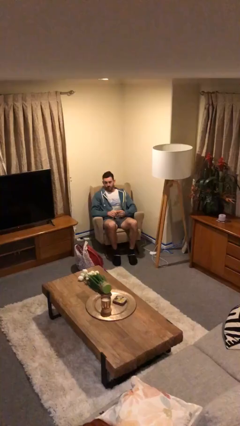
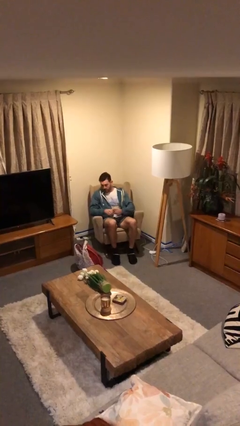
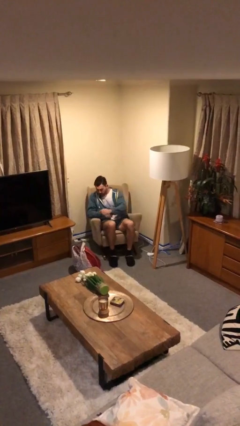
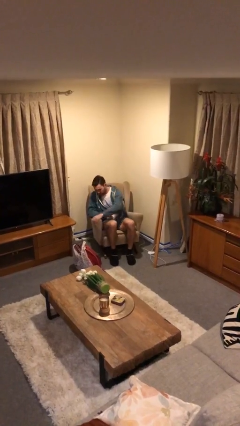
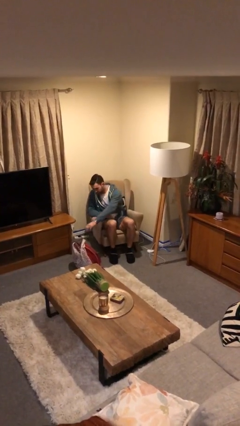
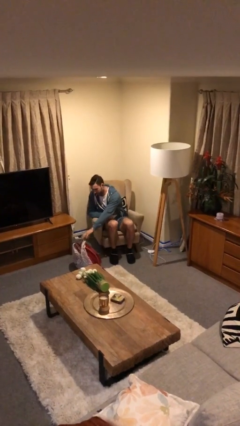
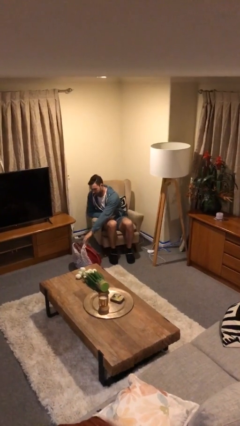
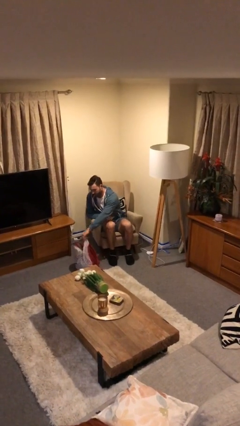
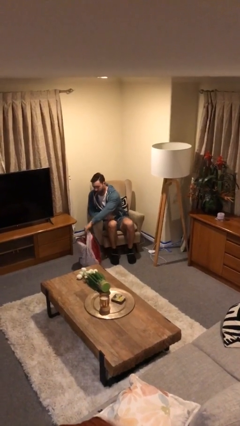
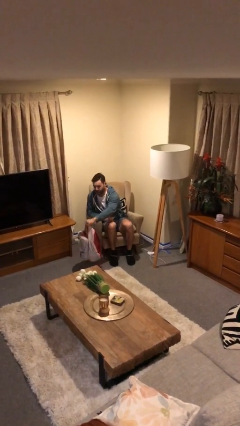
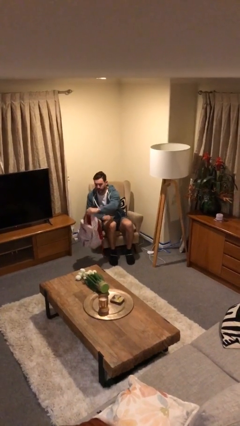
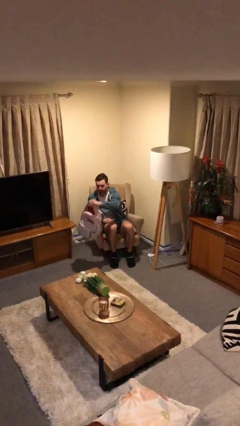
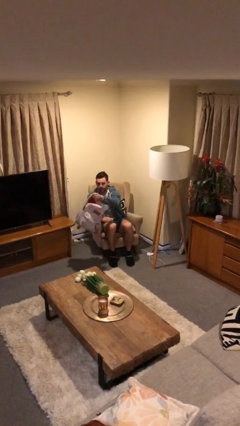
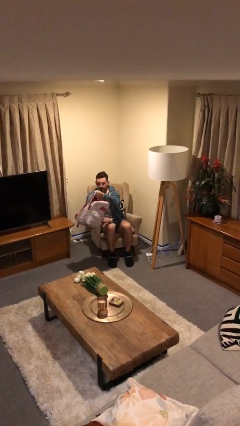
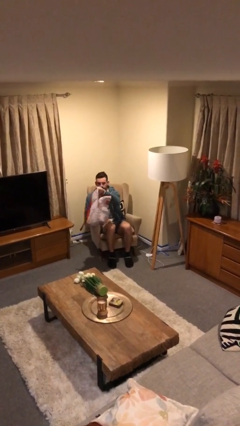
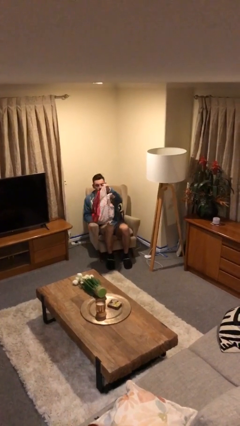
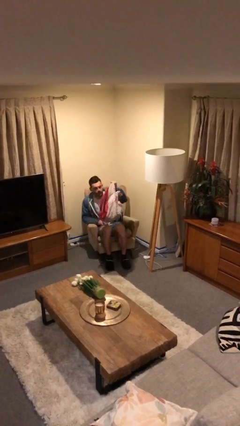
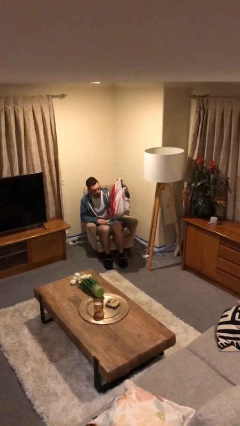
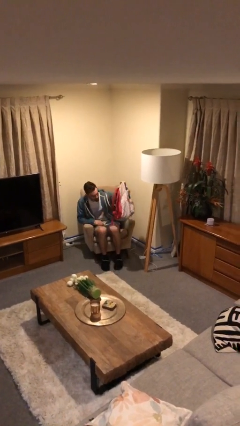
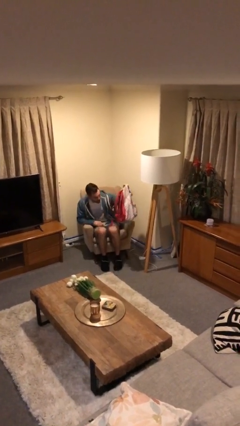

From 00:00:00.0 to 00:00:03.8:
person picks up object from floor

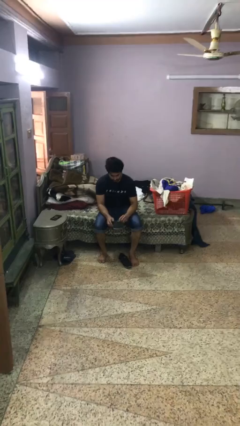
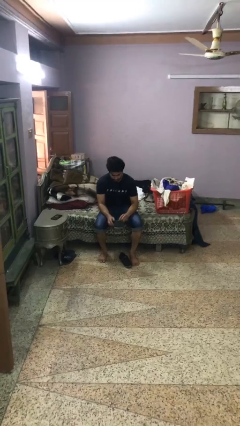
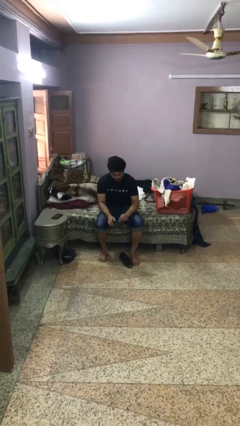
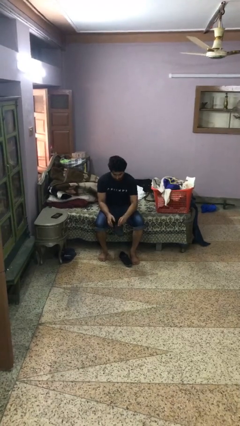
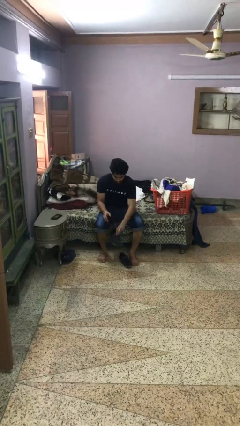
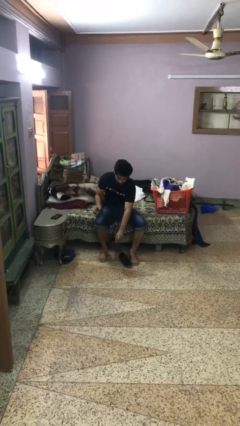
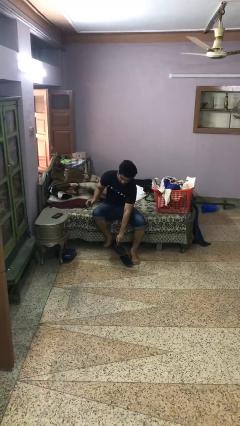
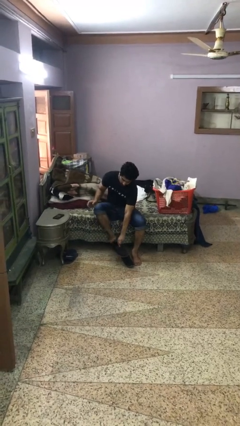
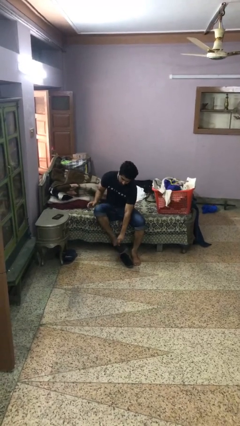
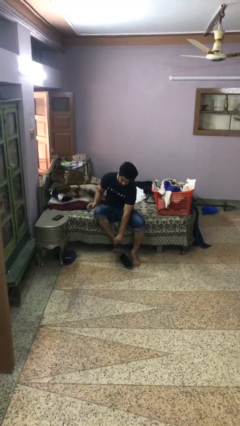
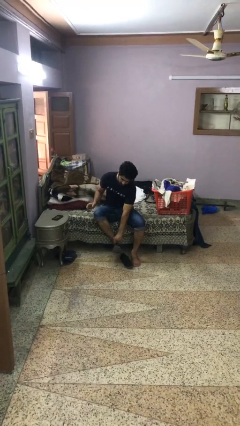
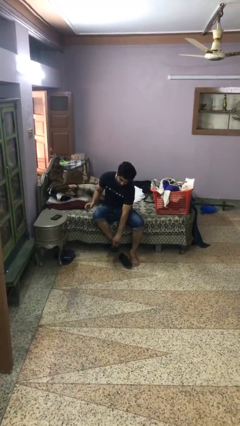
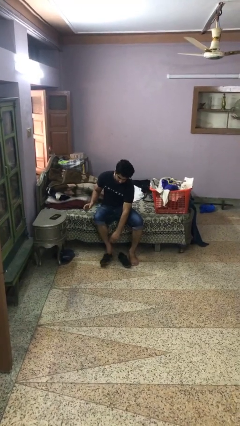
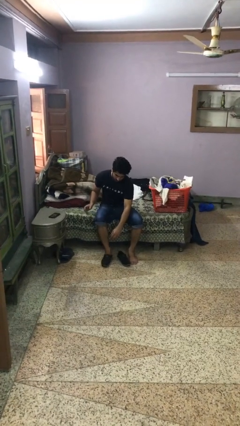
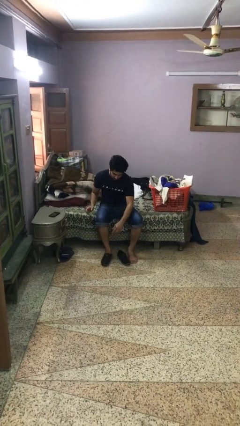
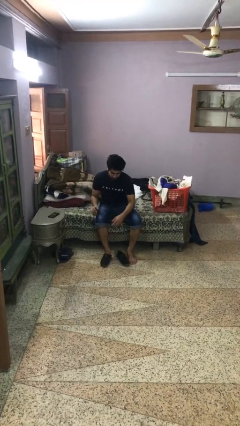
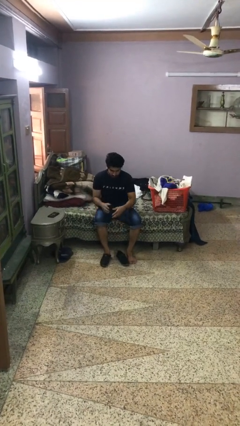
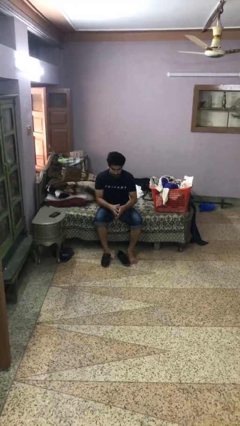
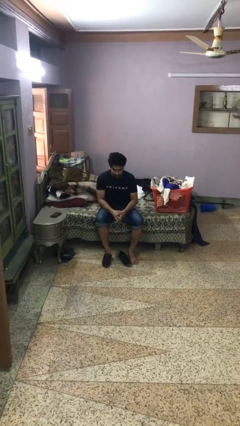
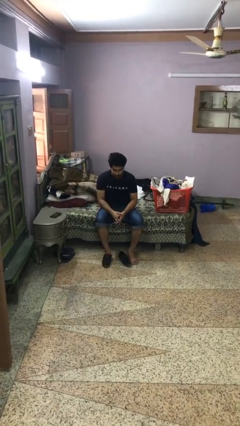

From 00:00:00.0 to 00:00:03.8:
person puts on boots

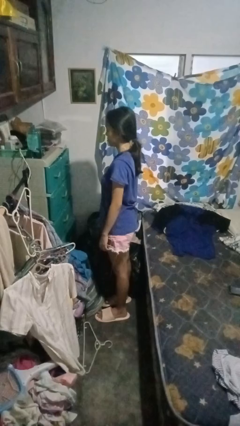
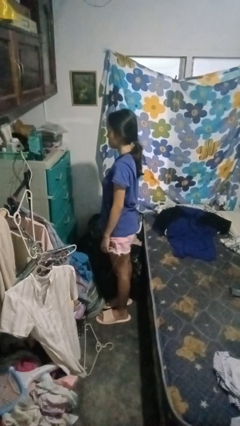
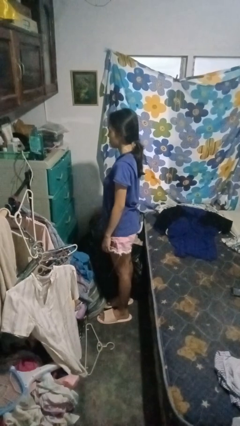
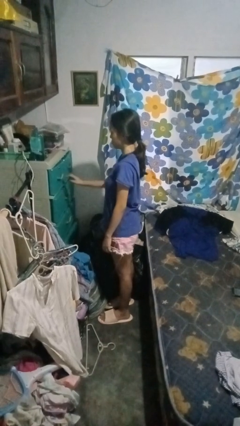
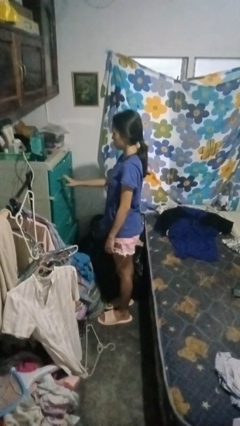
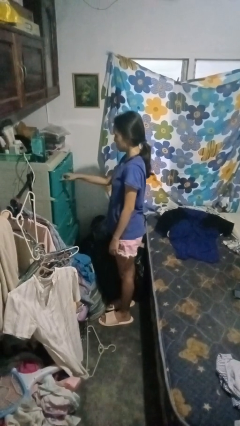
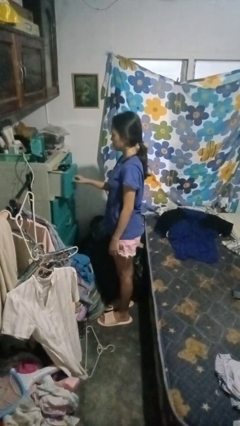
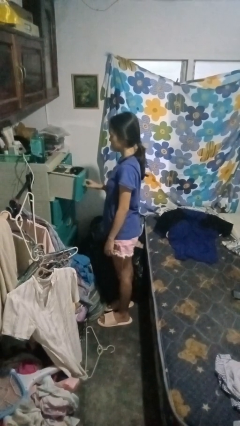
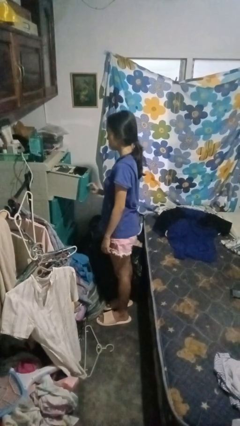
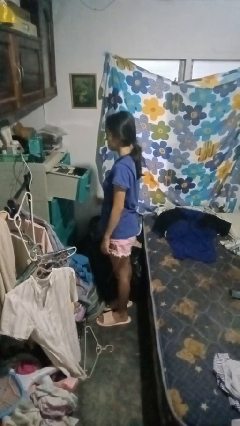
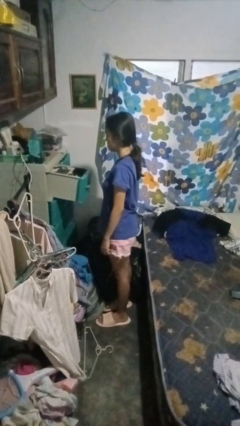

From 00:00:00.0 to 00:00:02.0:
person opens dresser drawer

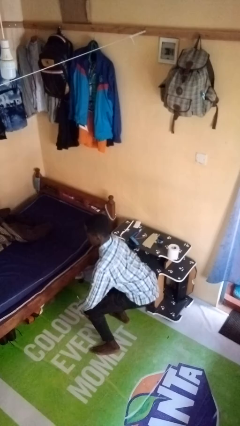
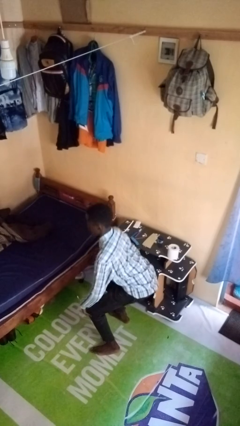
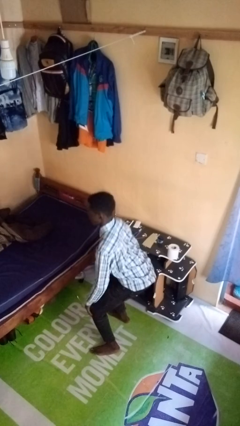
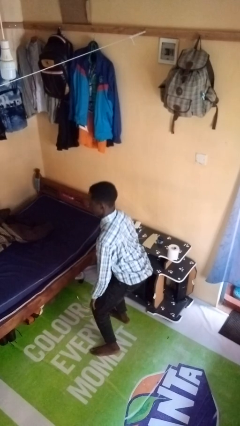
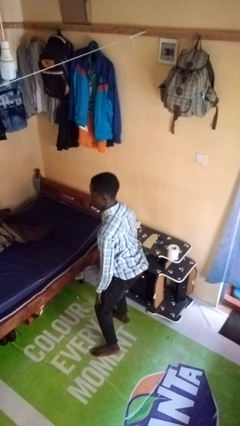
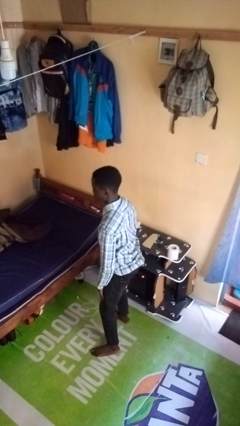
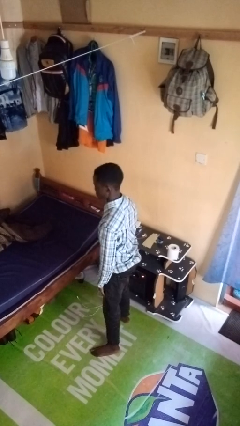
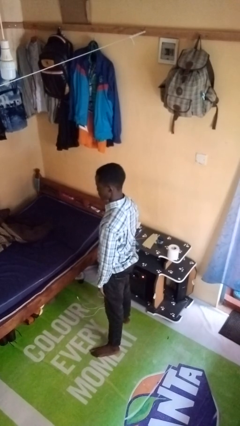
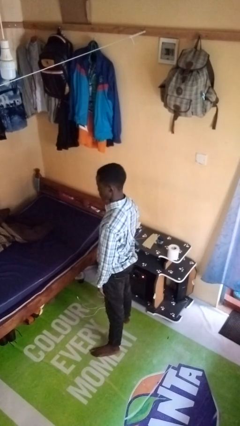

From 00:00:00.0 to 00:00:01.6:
person stands up

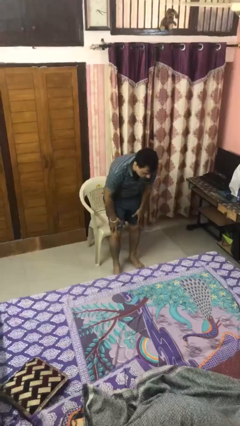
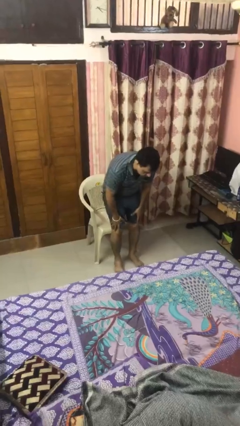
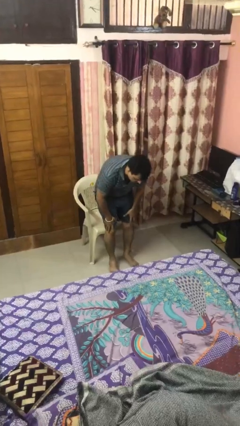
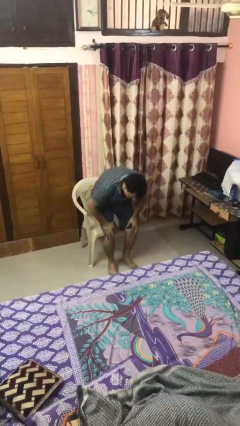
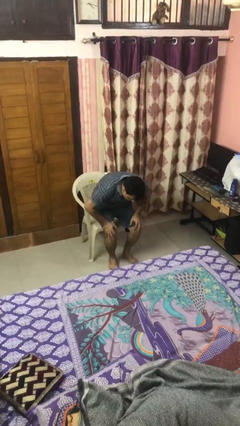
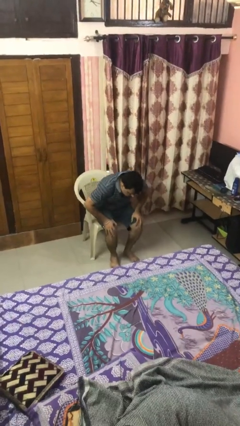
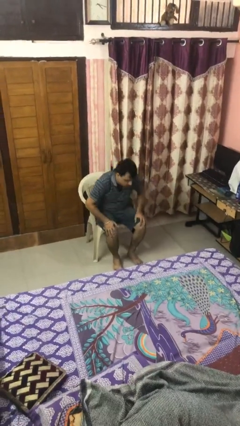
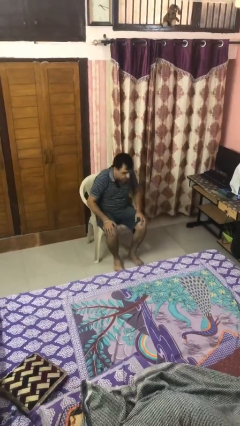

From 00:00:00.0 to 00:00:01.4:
person sits down

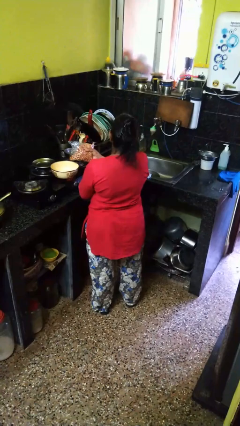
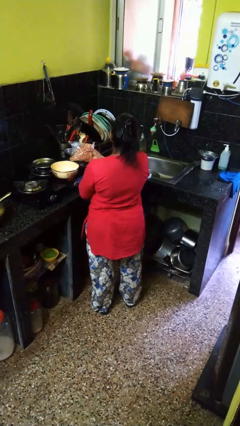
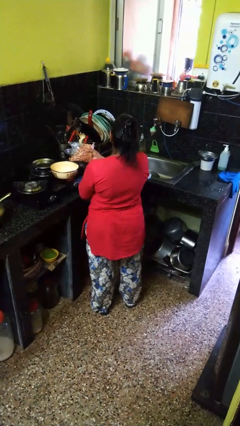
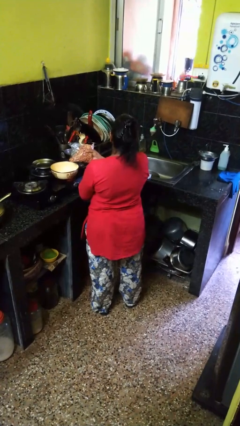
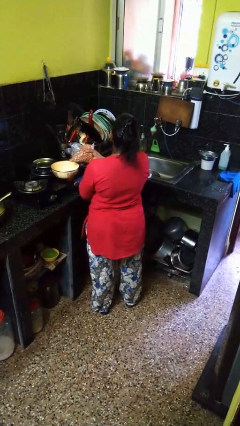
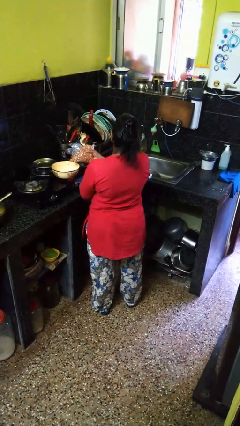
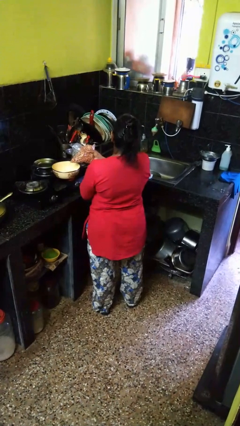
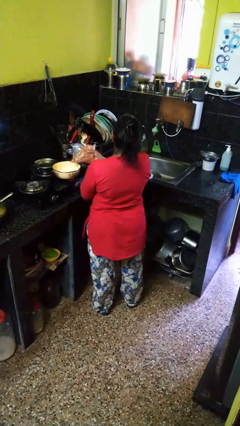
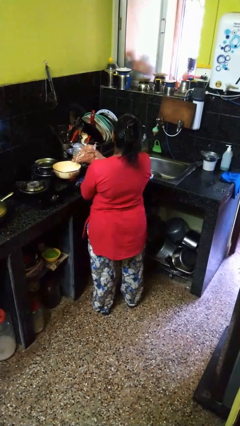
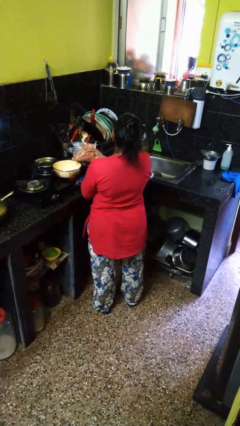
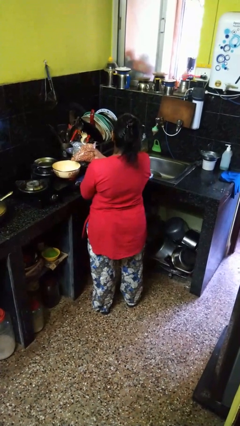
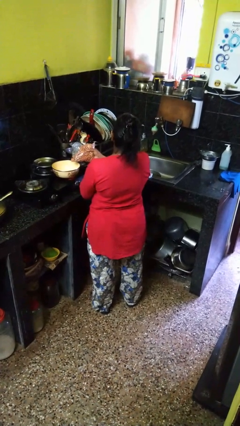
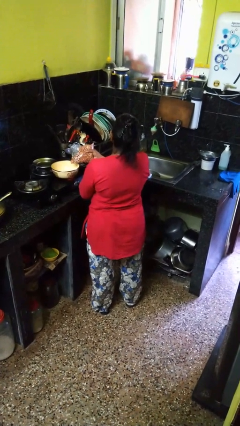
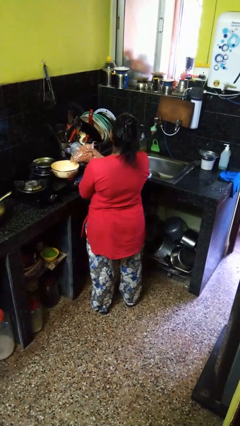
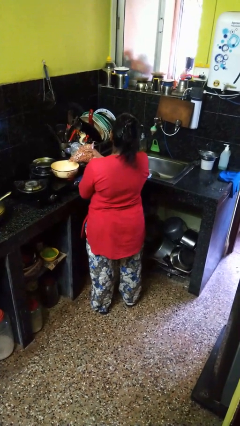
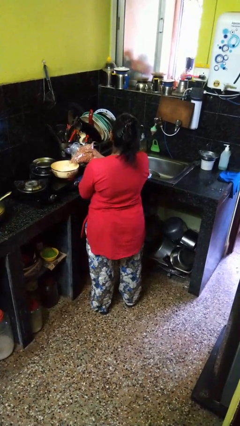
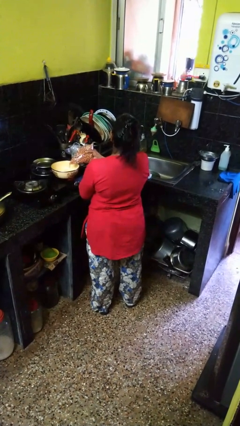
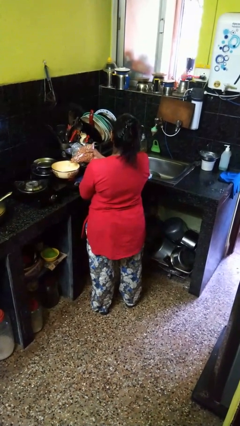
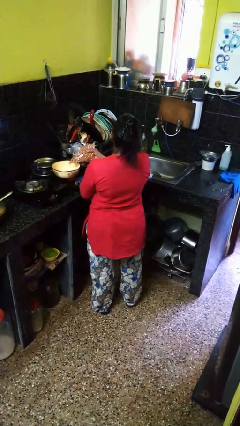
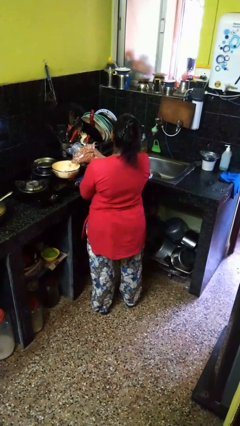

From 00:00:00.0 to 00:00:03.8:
person pours into bowl

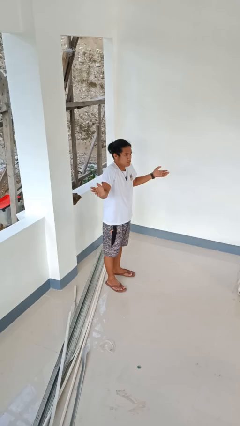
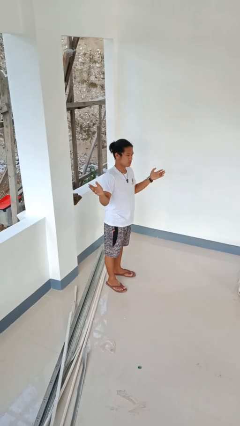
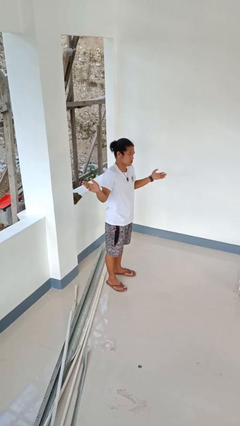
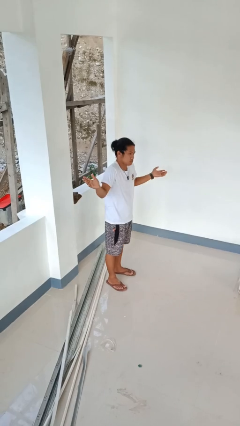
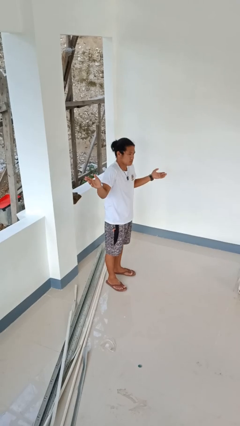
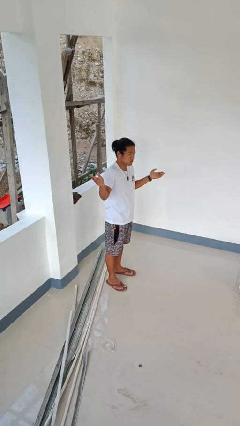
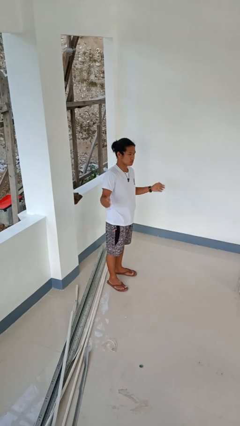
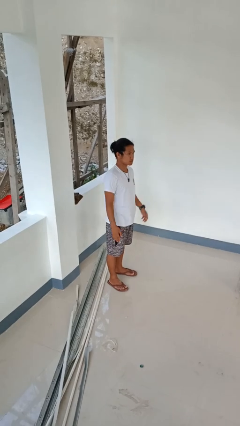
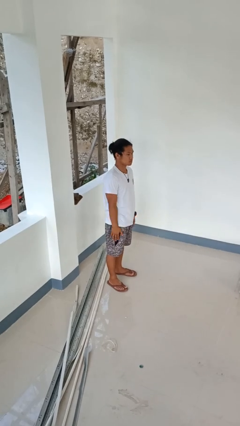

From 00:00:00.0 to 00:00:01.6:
person shrugs
